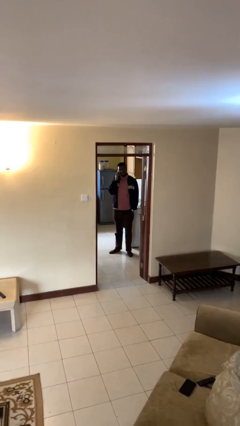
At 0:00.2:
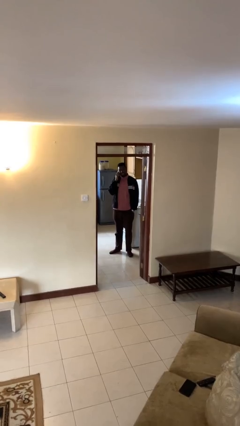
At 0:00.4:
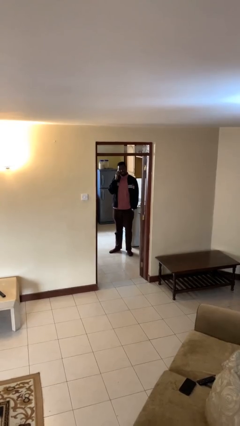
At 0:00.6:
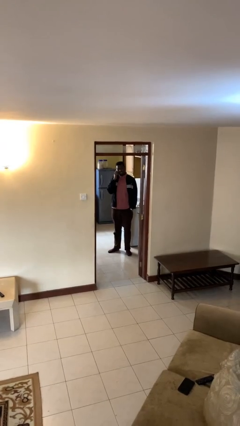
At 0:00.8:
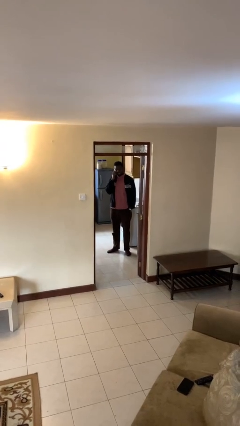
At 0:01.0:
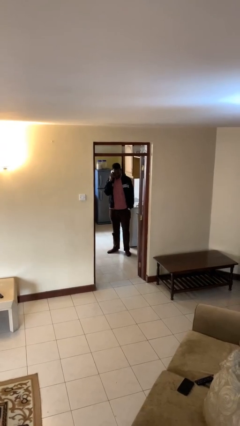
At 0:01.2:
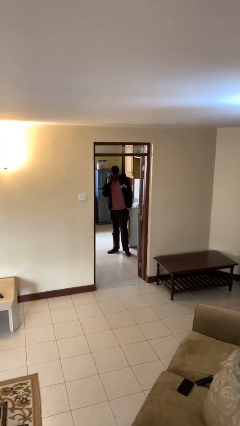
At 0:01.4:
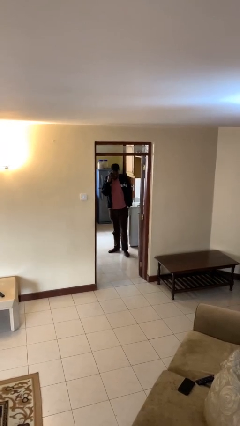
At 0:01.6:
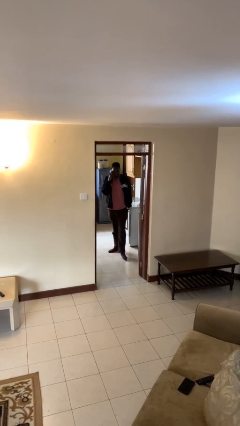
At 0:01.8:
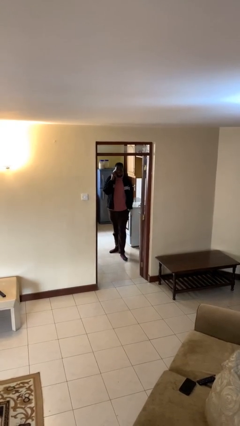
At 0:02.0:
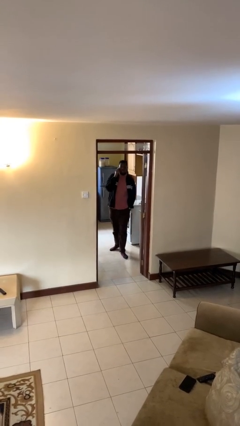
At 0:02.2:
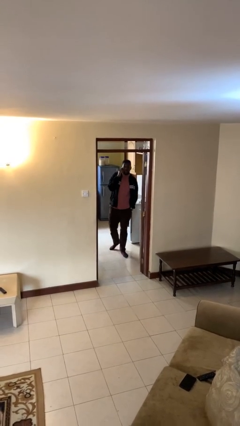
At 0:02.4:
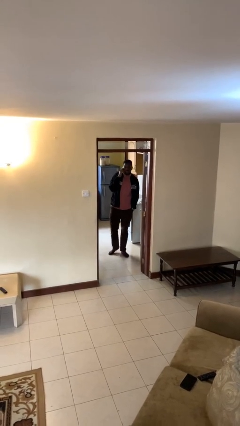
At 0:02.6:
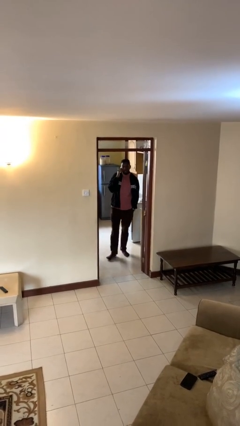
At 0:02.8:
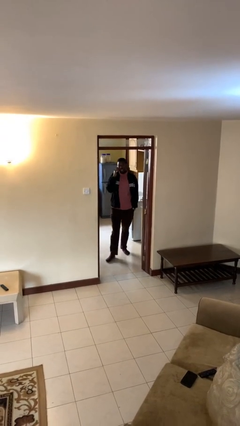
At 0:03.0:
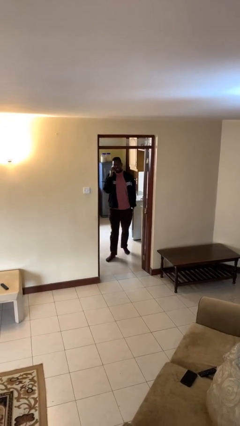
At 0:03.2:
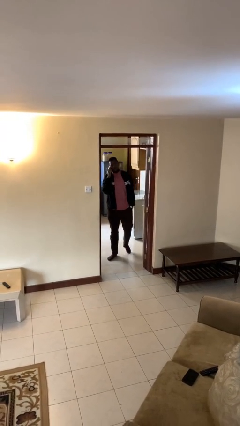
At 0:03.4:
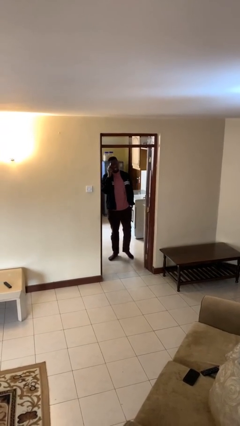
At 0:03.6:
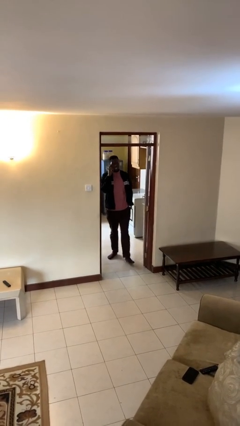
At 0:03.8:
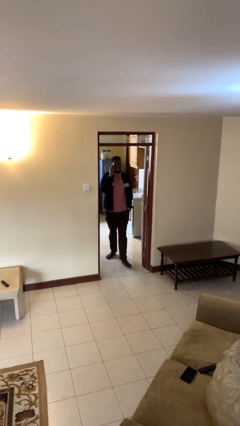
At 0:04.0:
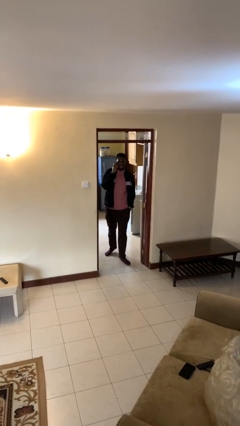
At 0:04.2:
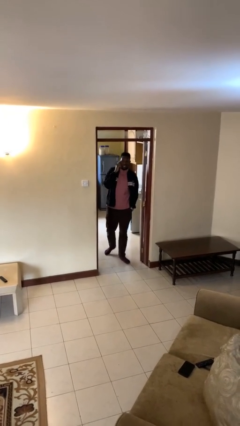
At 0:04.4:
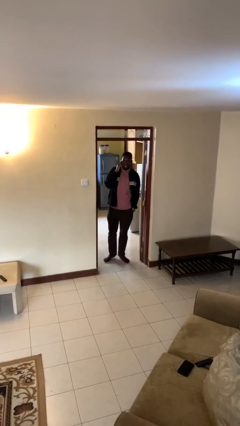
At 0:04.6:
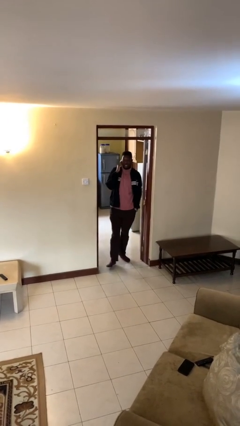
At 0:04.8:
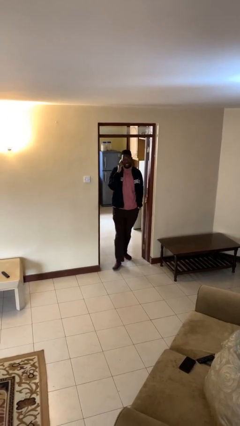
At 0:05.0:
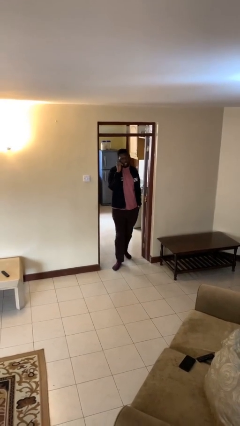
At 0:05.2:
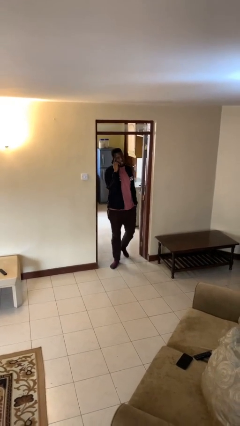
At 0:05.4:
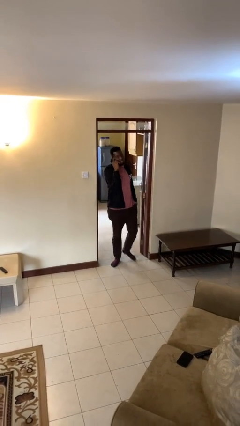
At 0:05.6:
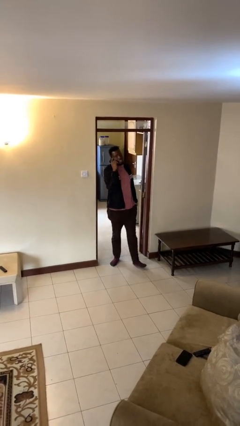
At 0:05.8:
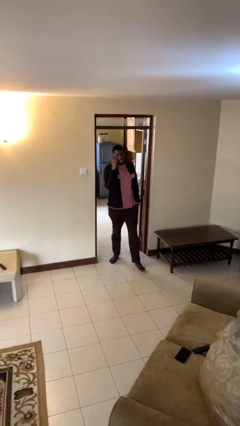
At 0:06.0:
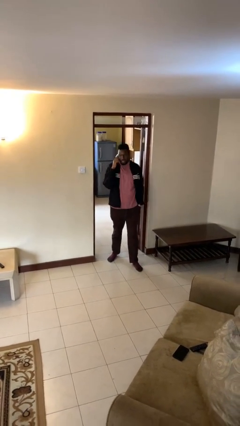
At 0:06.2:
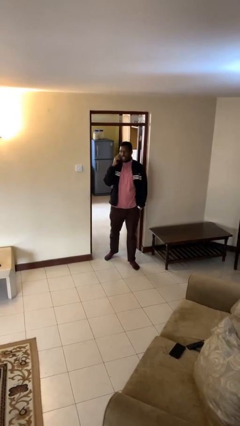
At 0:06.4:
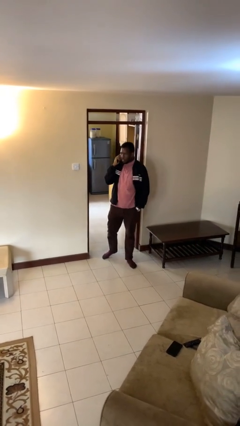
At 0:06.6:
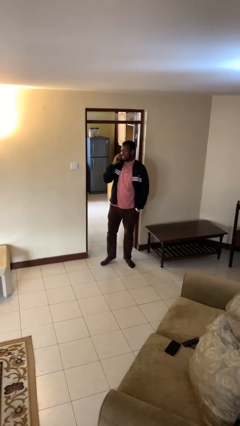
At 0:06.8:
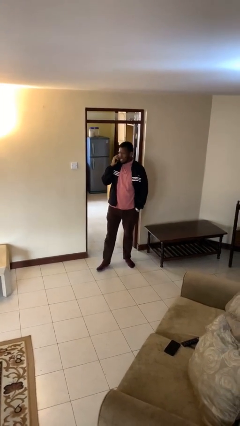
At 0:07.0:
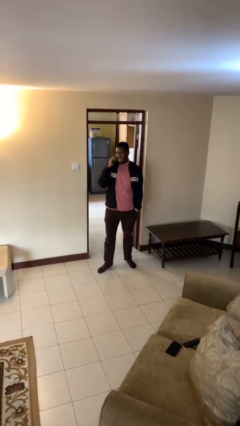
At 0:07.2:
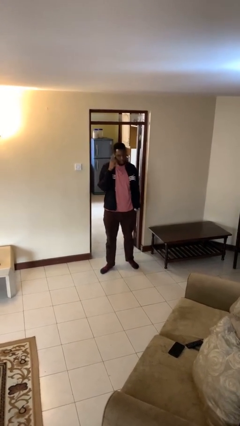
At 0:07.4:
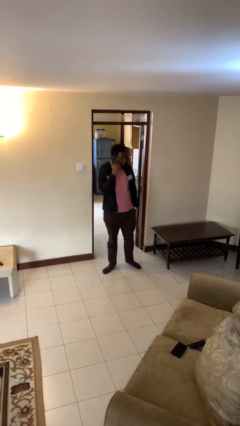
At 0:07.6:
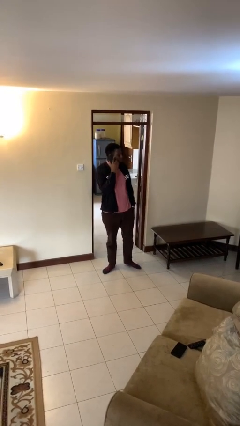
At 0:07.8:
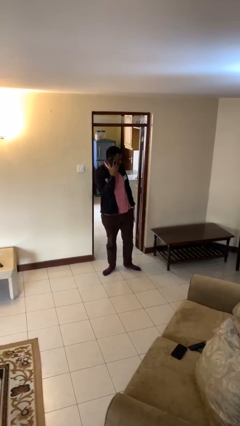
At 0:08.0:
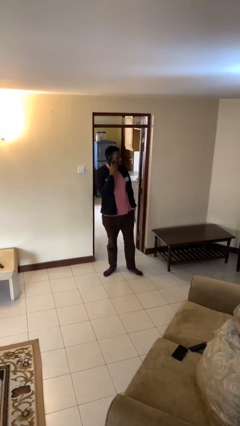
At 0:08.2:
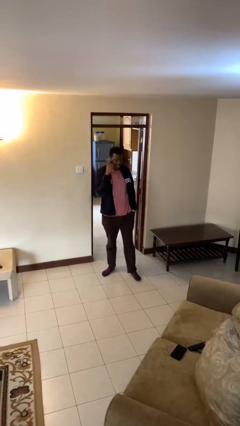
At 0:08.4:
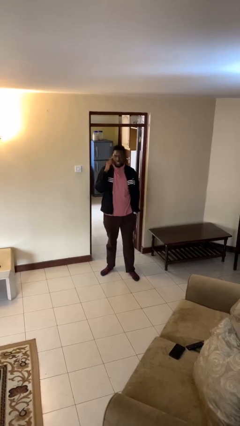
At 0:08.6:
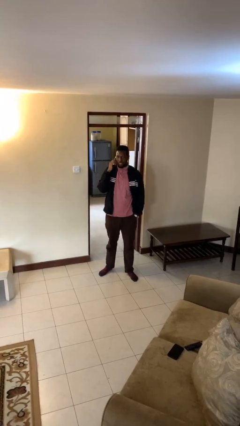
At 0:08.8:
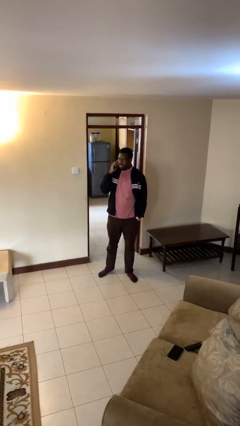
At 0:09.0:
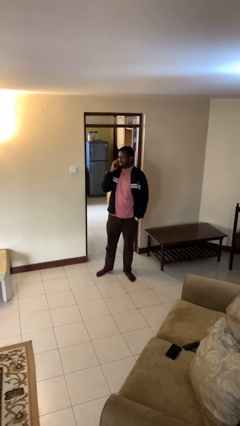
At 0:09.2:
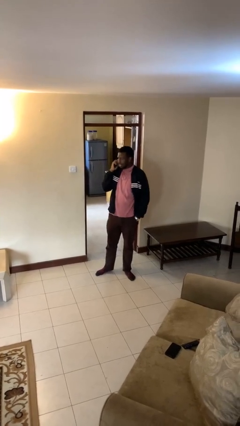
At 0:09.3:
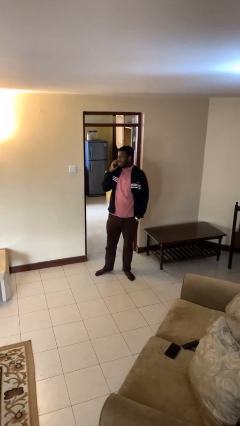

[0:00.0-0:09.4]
person enters scene through structure

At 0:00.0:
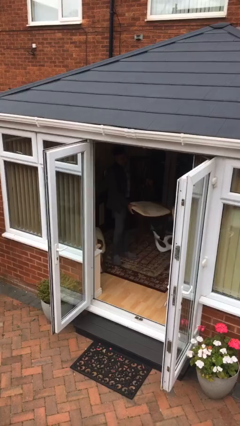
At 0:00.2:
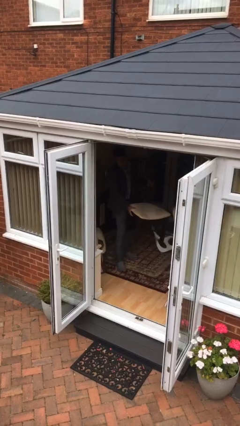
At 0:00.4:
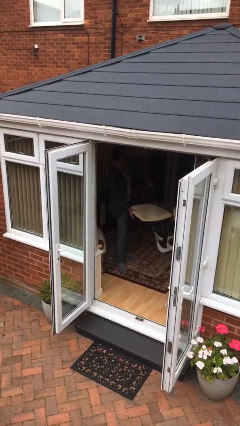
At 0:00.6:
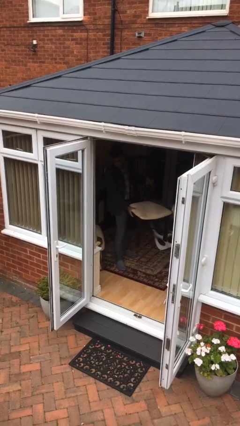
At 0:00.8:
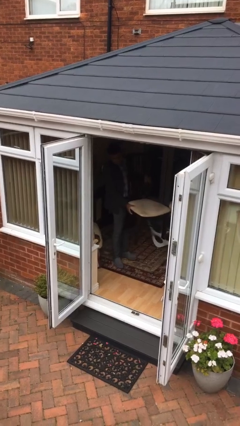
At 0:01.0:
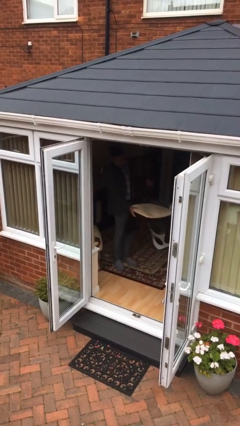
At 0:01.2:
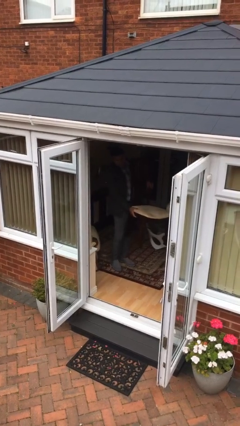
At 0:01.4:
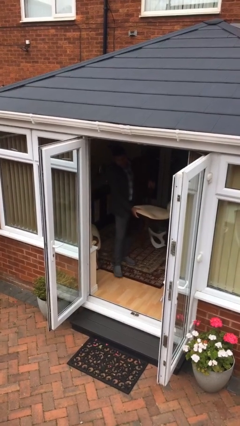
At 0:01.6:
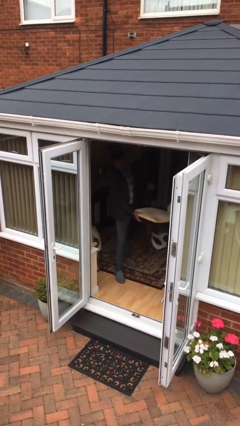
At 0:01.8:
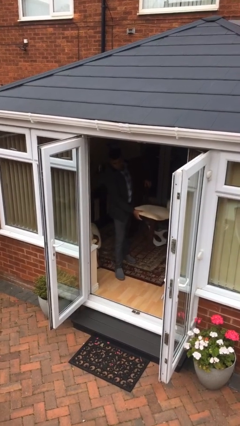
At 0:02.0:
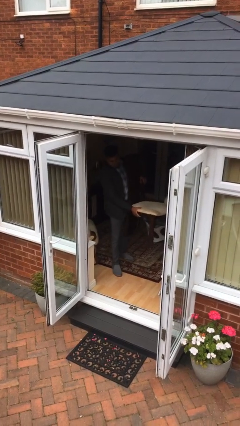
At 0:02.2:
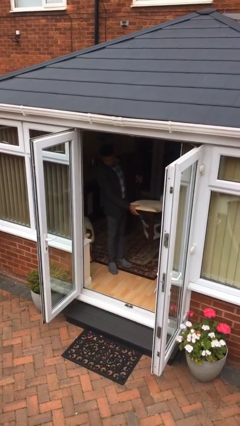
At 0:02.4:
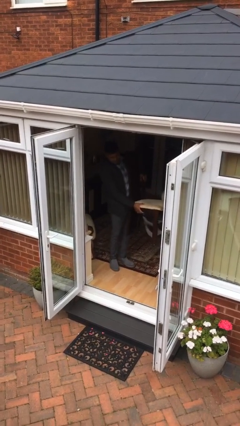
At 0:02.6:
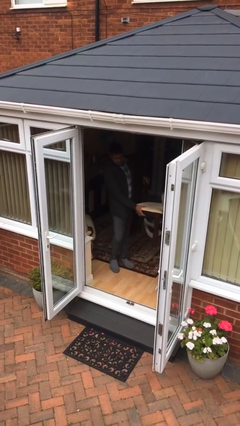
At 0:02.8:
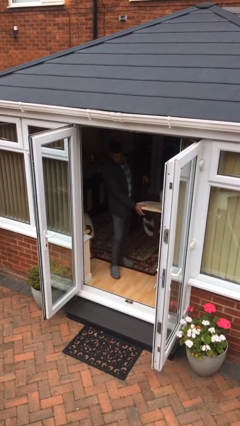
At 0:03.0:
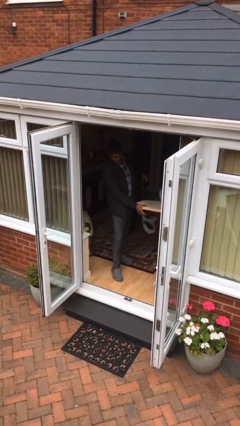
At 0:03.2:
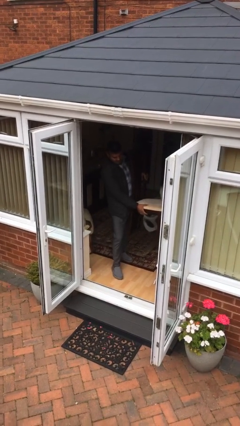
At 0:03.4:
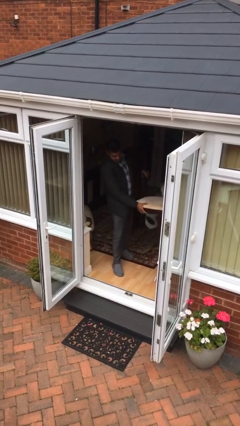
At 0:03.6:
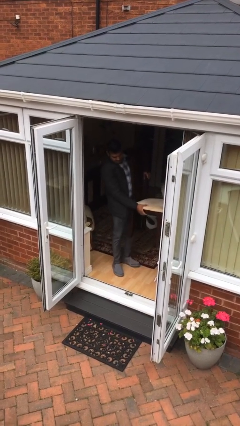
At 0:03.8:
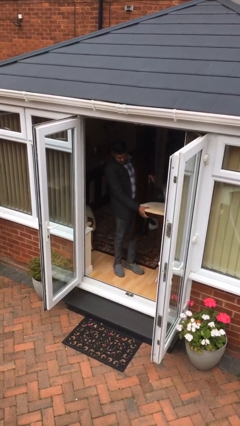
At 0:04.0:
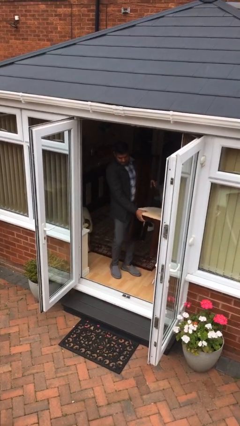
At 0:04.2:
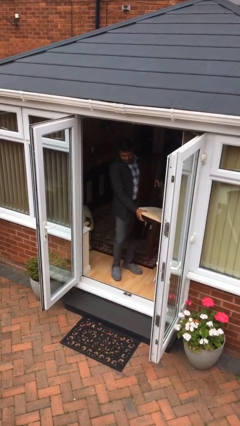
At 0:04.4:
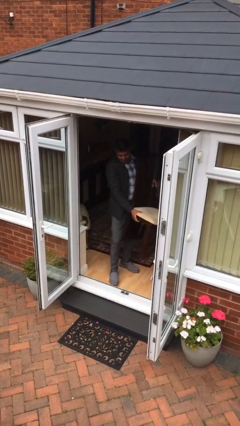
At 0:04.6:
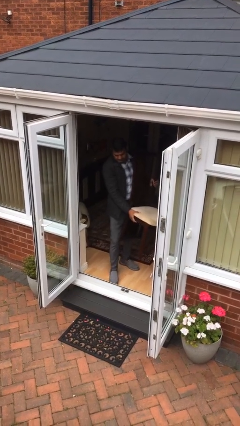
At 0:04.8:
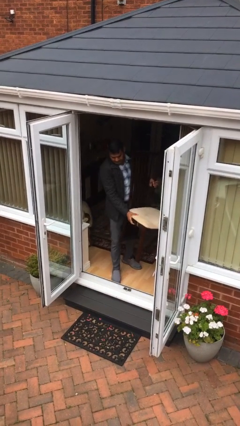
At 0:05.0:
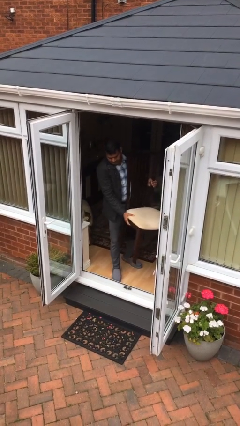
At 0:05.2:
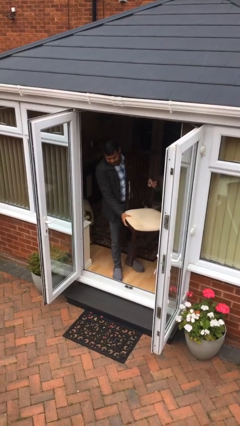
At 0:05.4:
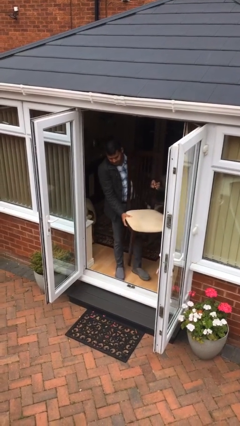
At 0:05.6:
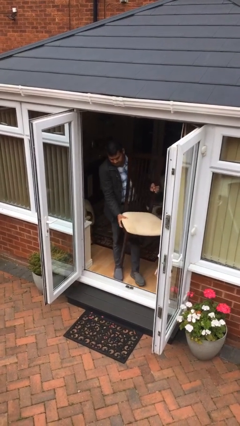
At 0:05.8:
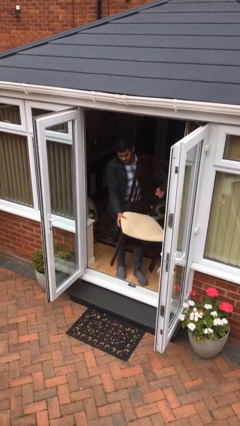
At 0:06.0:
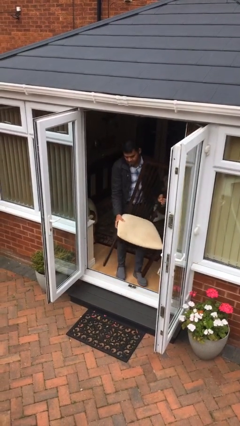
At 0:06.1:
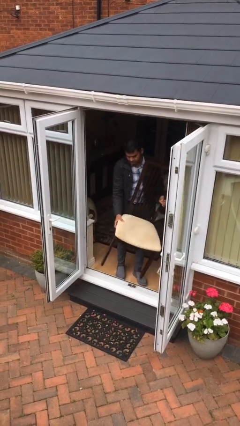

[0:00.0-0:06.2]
person carries heavy object

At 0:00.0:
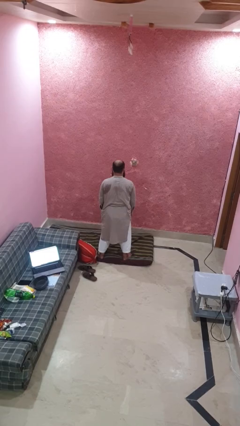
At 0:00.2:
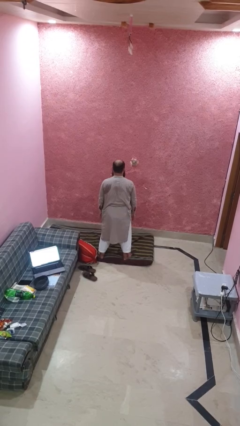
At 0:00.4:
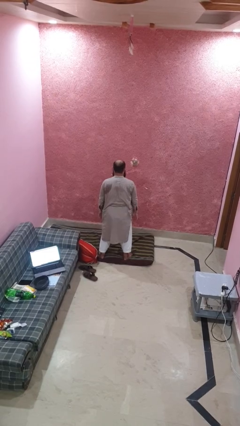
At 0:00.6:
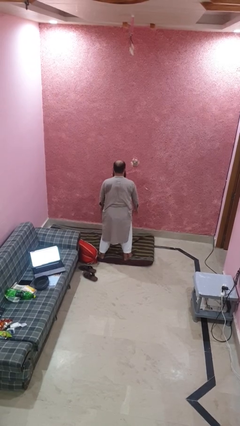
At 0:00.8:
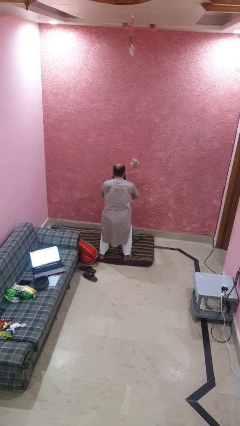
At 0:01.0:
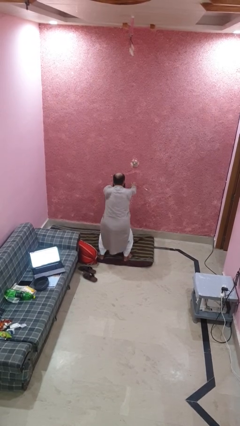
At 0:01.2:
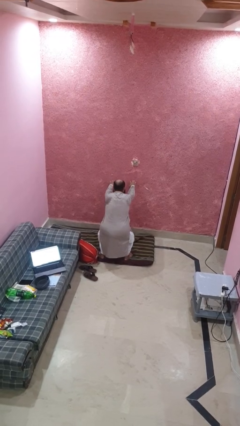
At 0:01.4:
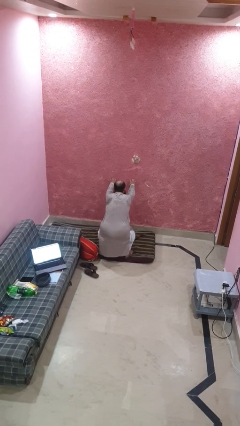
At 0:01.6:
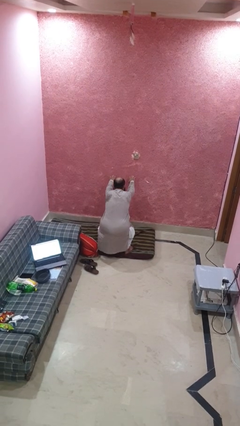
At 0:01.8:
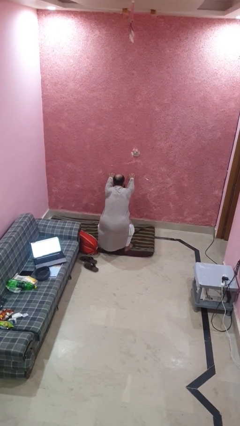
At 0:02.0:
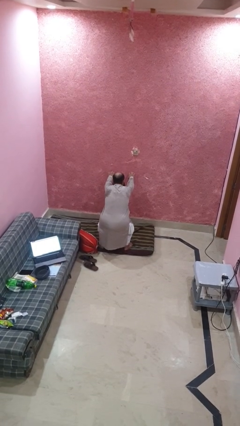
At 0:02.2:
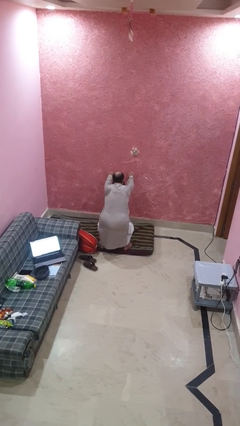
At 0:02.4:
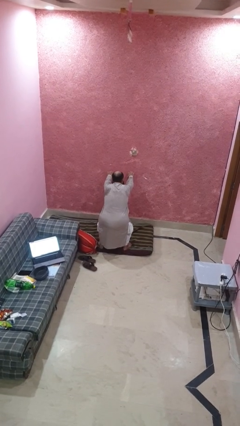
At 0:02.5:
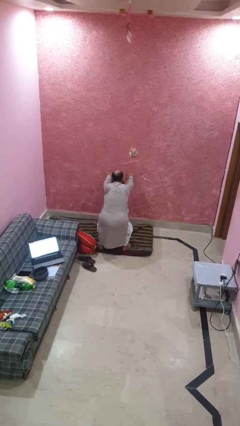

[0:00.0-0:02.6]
person squats
